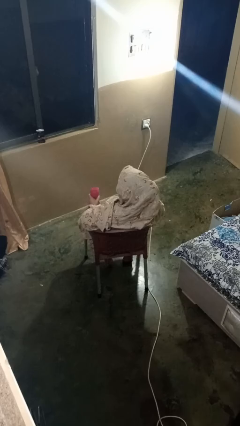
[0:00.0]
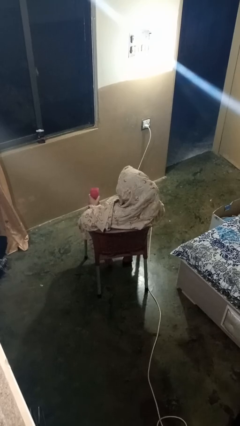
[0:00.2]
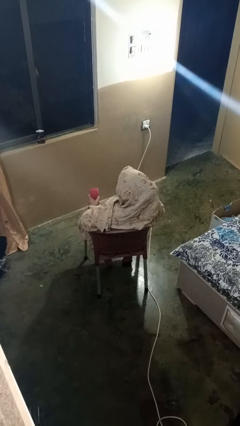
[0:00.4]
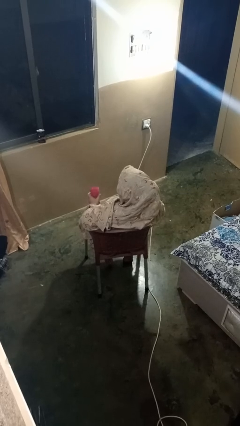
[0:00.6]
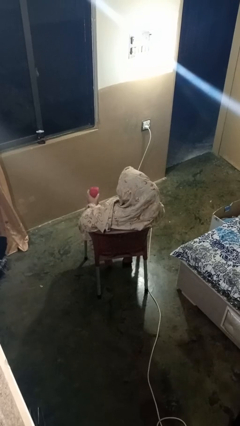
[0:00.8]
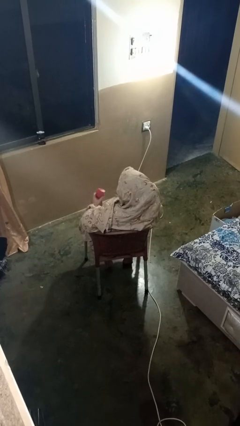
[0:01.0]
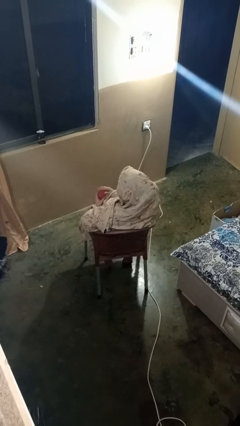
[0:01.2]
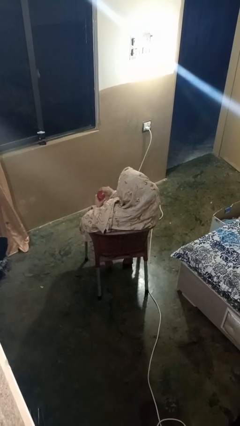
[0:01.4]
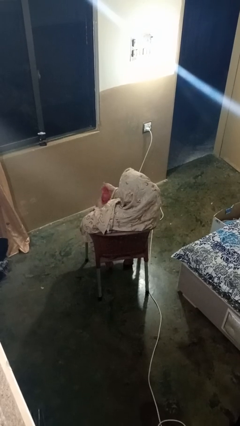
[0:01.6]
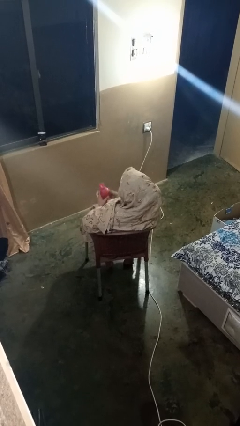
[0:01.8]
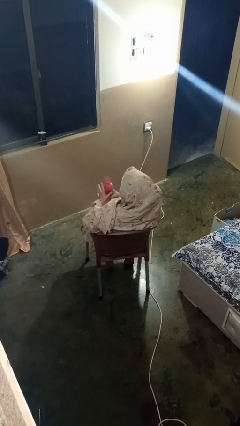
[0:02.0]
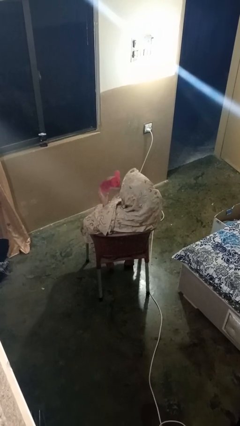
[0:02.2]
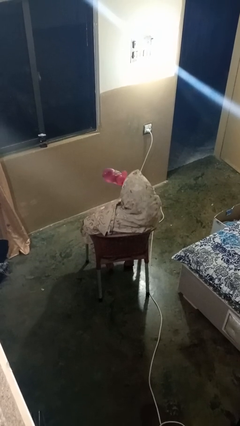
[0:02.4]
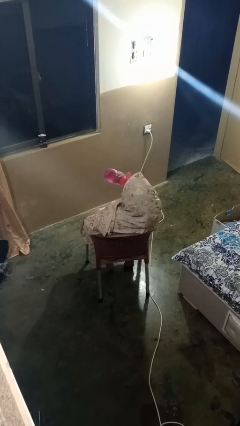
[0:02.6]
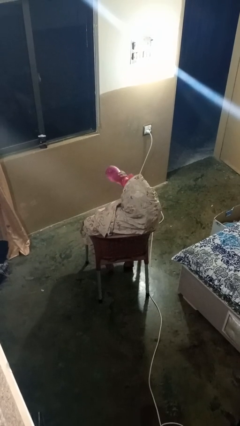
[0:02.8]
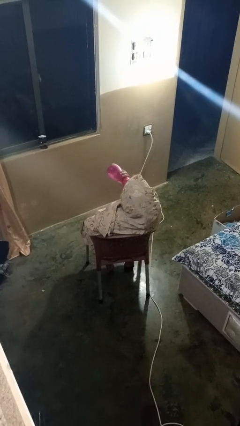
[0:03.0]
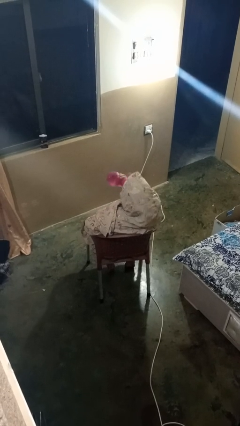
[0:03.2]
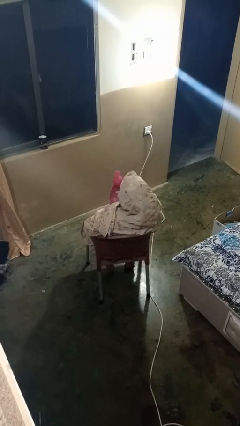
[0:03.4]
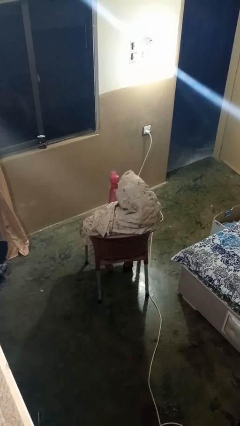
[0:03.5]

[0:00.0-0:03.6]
person drinks from bottle

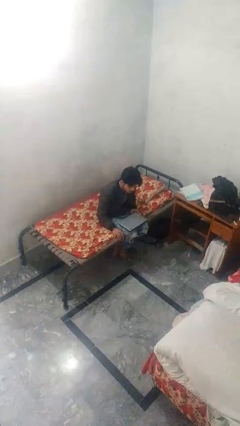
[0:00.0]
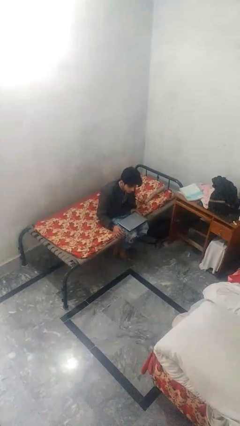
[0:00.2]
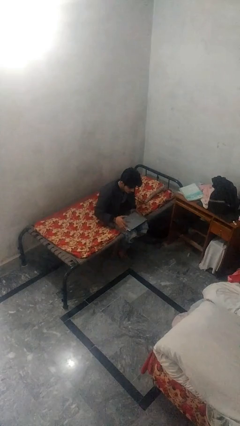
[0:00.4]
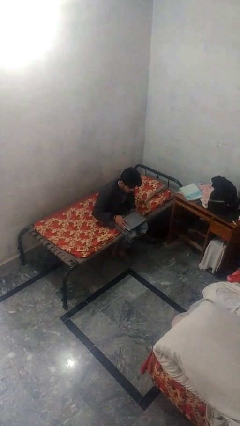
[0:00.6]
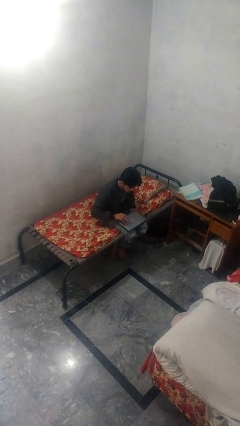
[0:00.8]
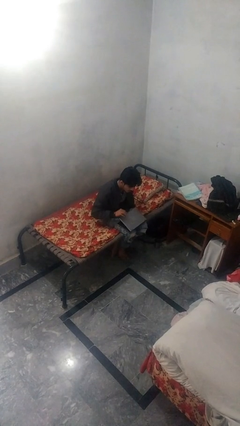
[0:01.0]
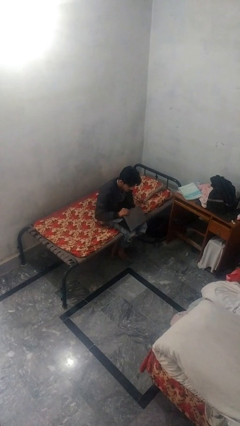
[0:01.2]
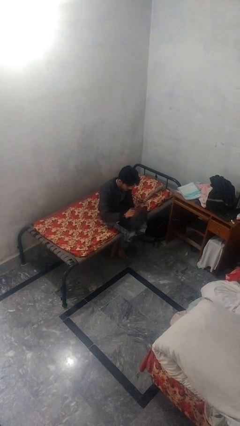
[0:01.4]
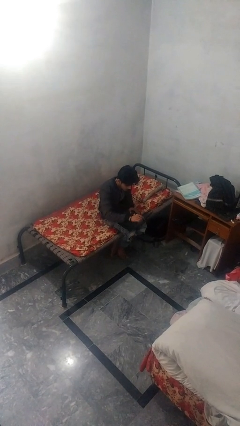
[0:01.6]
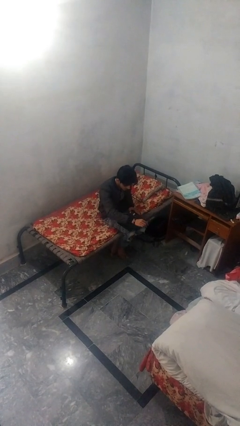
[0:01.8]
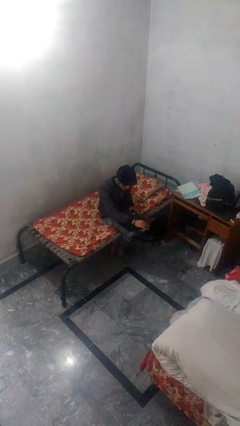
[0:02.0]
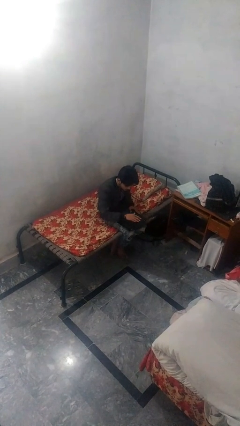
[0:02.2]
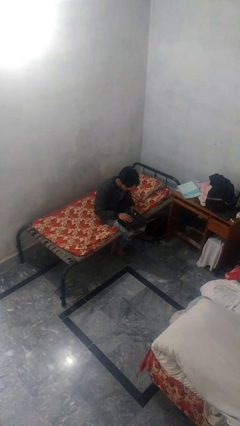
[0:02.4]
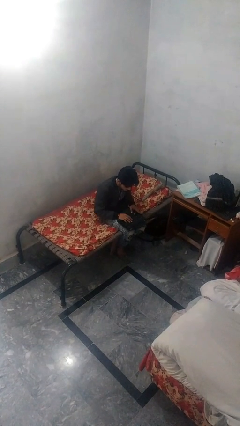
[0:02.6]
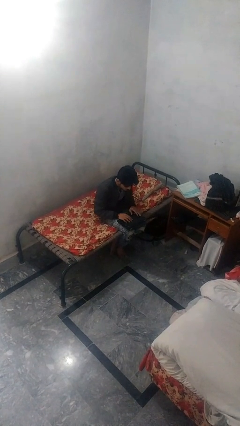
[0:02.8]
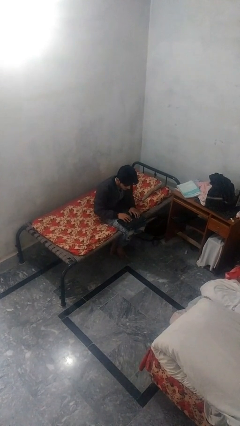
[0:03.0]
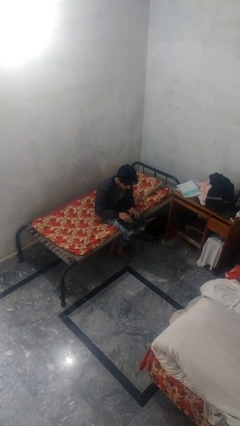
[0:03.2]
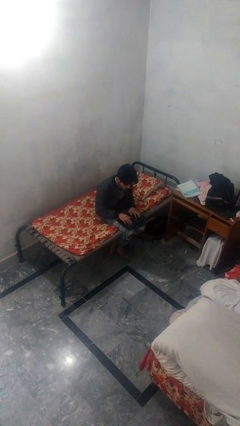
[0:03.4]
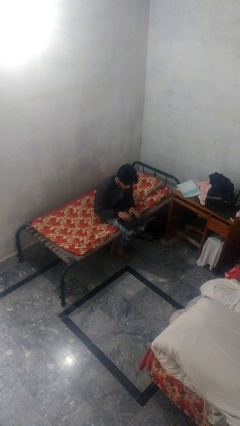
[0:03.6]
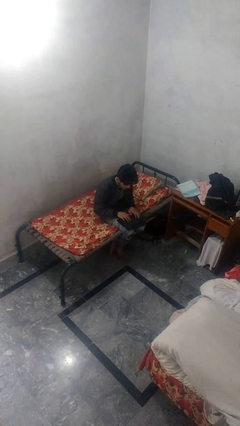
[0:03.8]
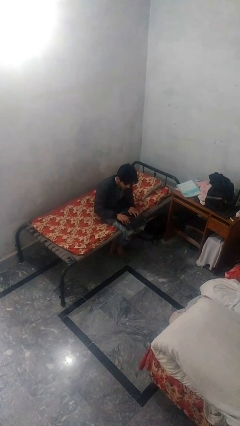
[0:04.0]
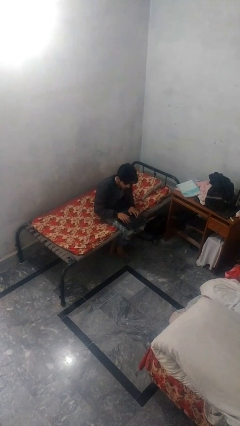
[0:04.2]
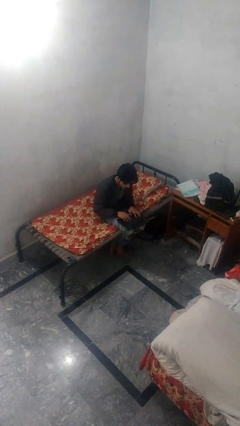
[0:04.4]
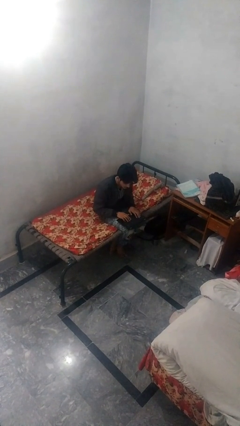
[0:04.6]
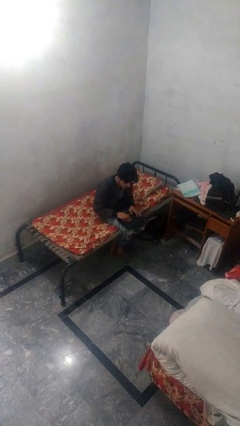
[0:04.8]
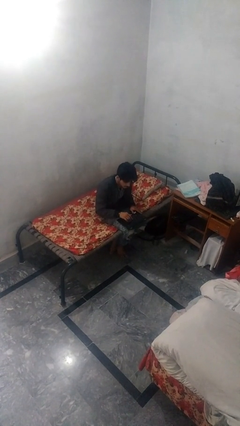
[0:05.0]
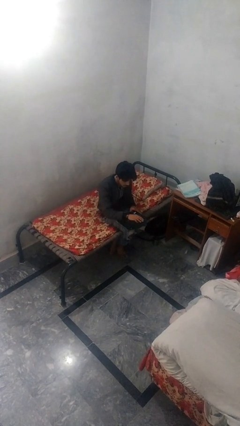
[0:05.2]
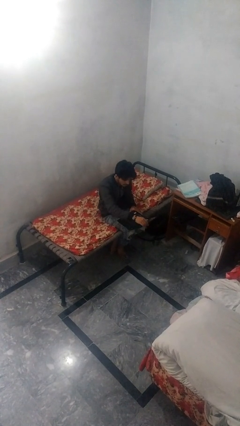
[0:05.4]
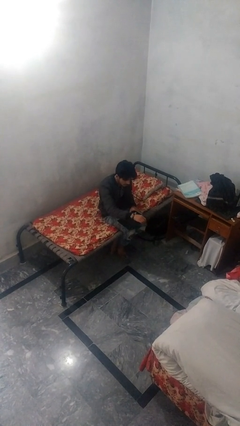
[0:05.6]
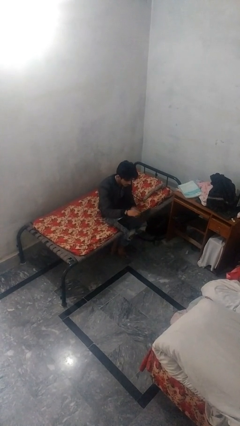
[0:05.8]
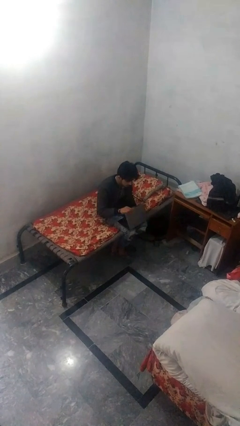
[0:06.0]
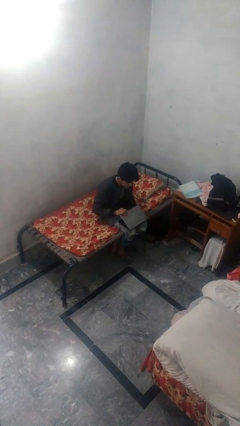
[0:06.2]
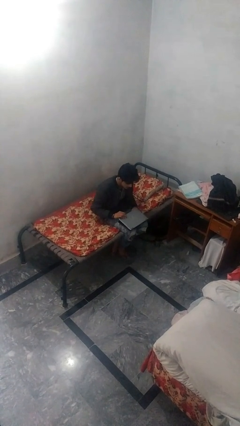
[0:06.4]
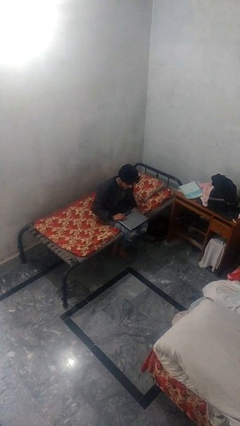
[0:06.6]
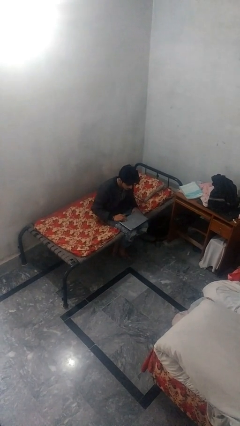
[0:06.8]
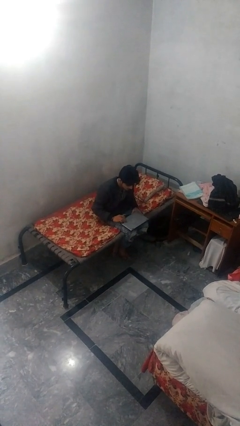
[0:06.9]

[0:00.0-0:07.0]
person interacts with laptop

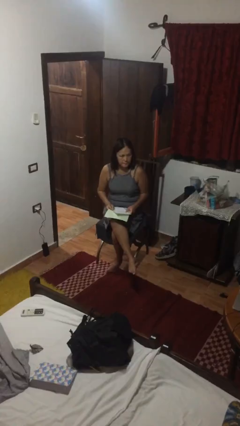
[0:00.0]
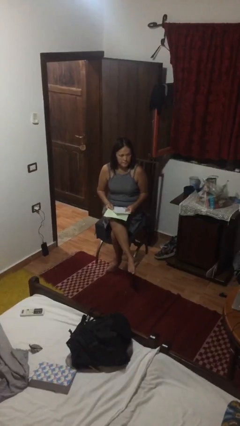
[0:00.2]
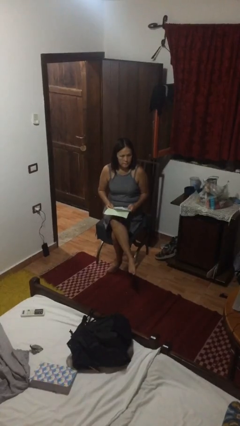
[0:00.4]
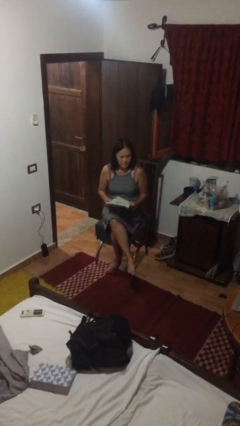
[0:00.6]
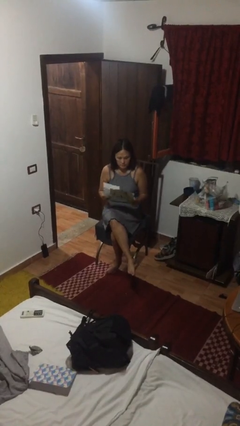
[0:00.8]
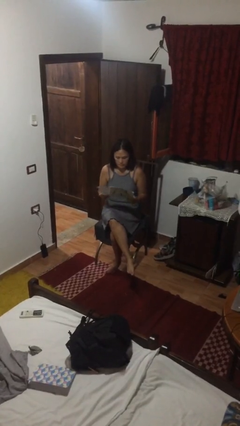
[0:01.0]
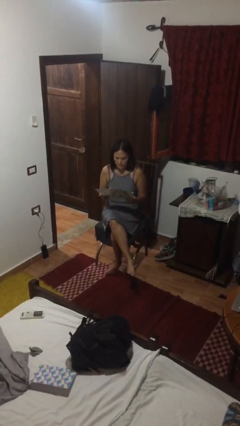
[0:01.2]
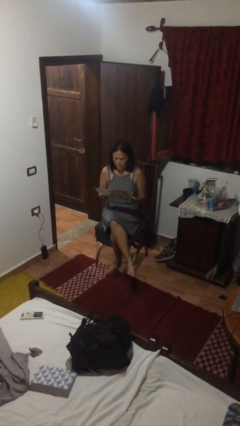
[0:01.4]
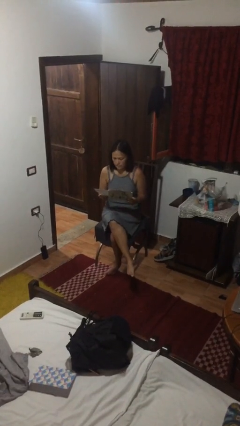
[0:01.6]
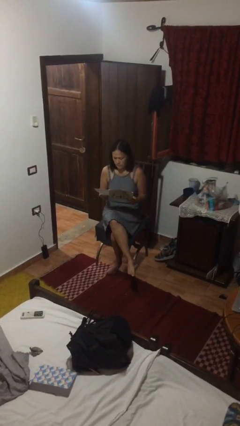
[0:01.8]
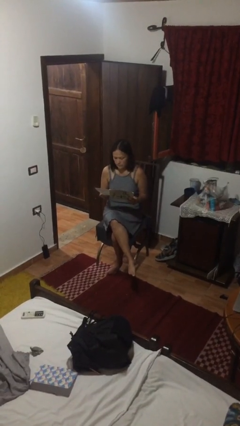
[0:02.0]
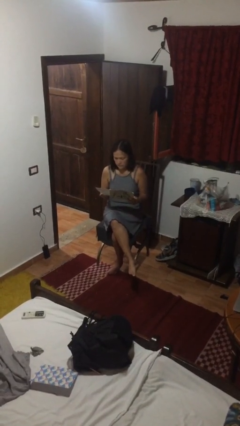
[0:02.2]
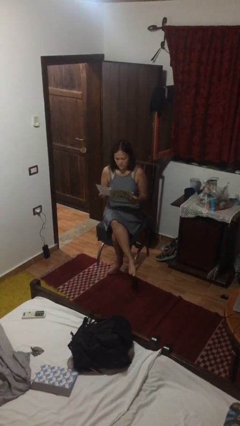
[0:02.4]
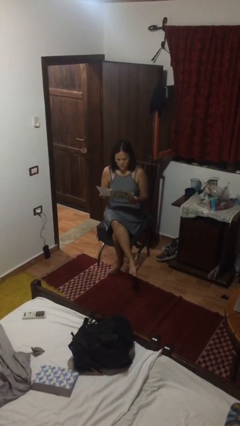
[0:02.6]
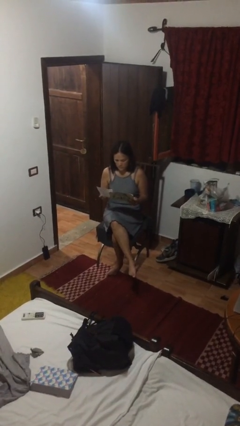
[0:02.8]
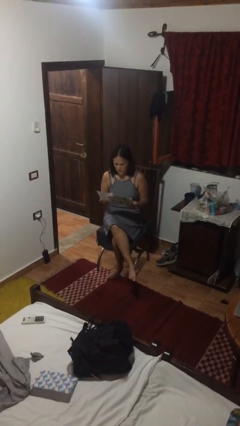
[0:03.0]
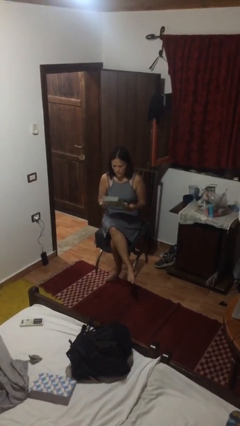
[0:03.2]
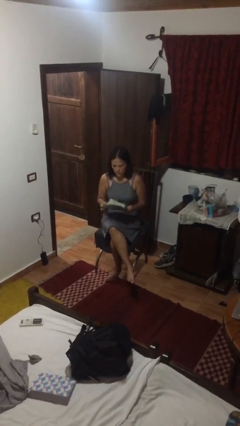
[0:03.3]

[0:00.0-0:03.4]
person reads newspaper

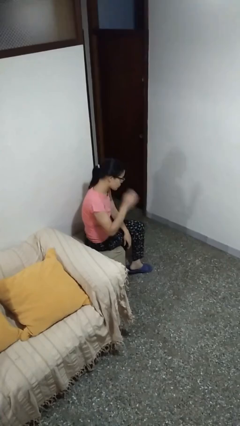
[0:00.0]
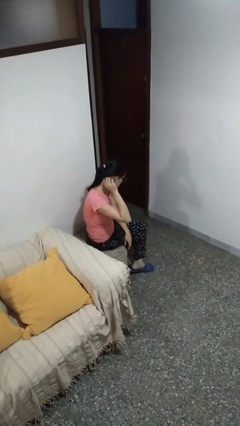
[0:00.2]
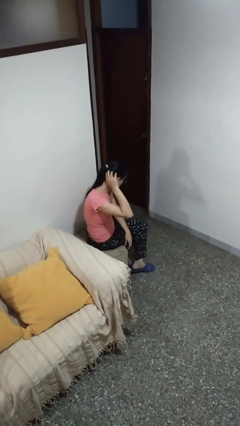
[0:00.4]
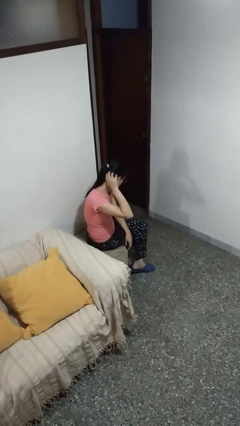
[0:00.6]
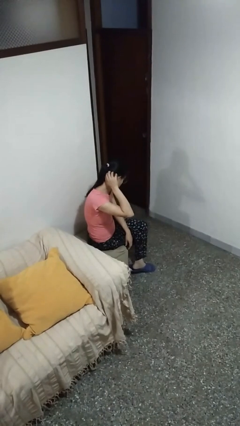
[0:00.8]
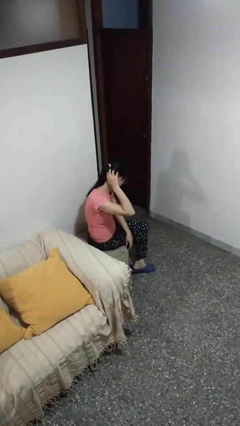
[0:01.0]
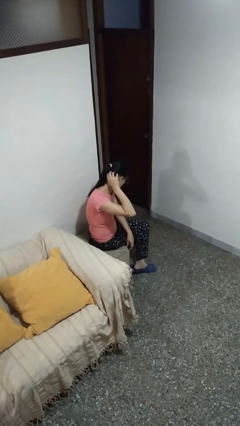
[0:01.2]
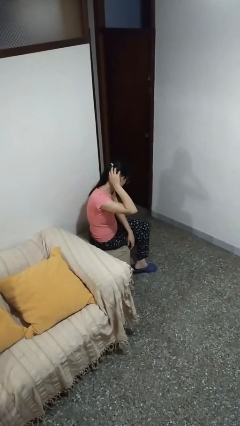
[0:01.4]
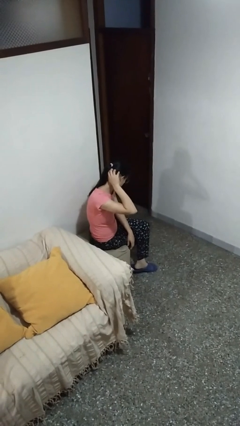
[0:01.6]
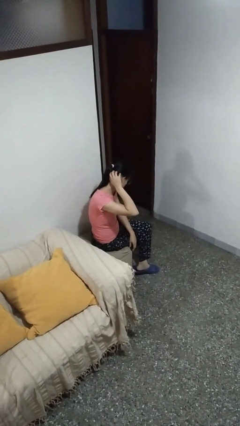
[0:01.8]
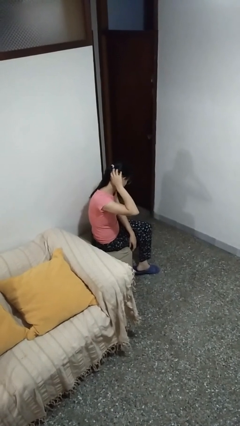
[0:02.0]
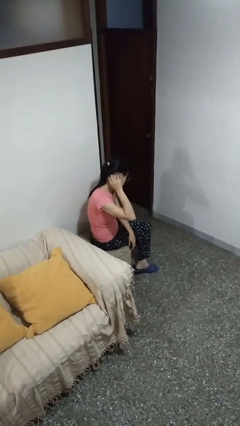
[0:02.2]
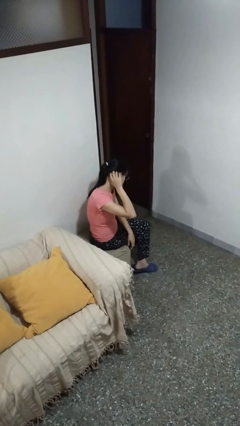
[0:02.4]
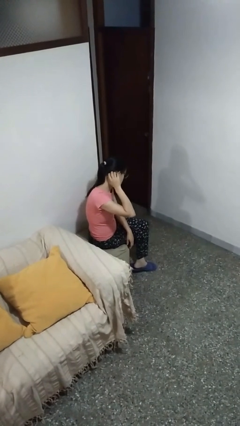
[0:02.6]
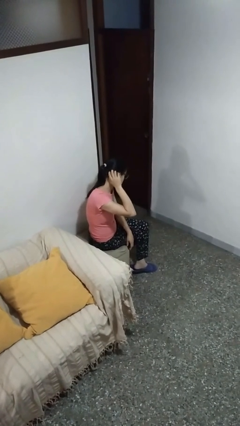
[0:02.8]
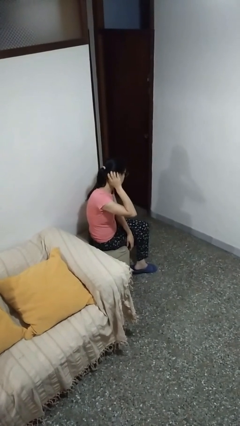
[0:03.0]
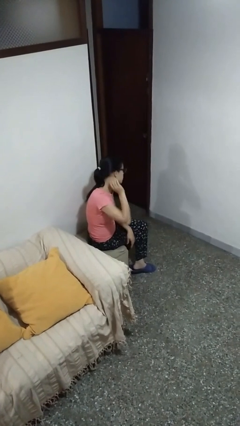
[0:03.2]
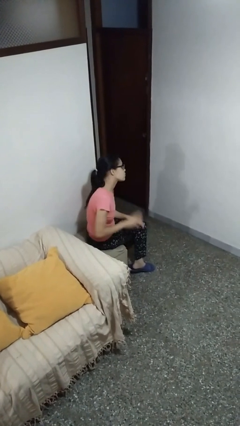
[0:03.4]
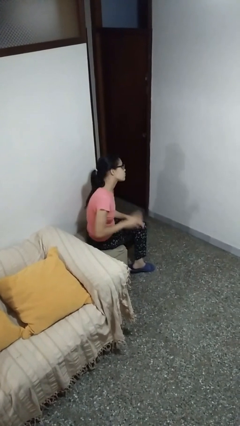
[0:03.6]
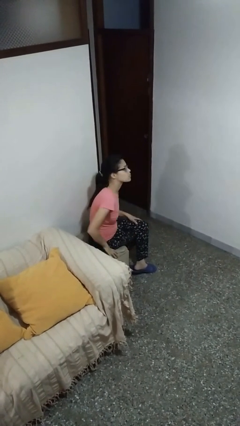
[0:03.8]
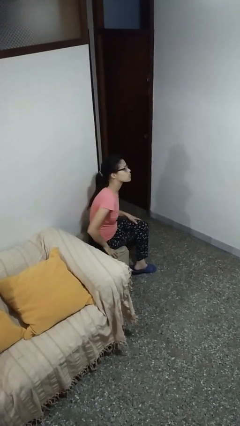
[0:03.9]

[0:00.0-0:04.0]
person scratches face

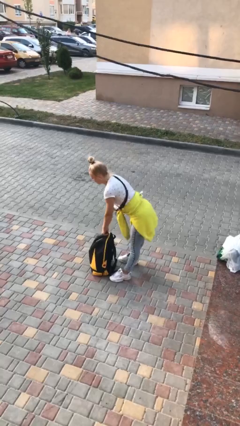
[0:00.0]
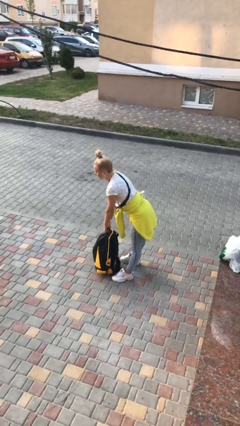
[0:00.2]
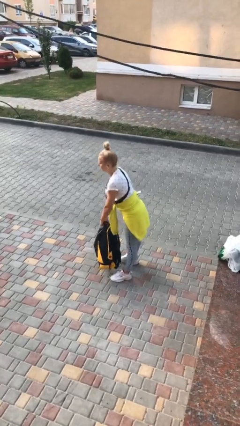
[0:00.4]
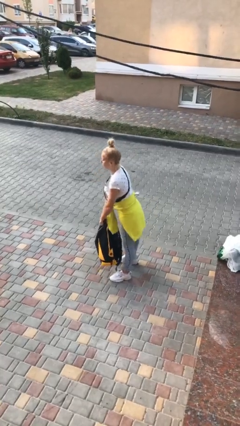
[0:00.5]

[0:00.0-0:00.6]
person picks up object from floor
